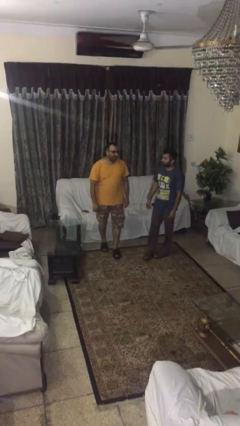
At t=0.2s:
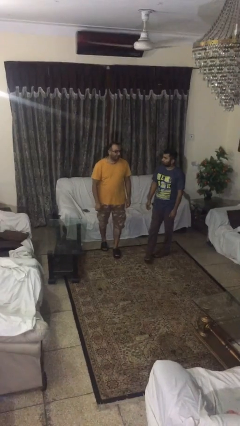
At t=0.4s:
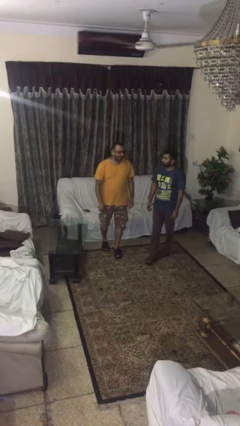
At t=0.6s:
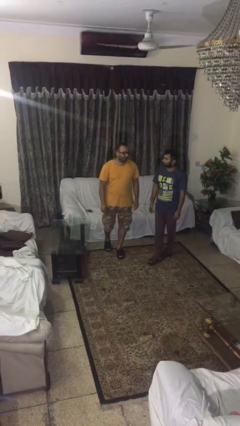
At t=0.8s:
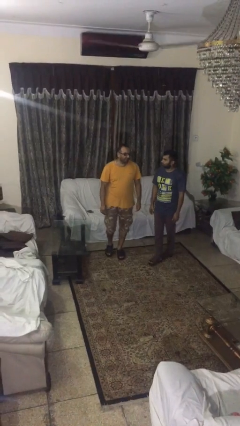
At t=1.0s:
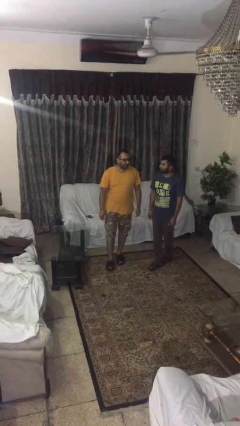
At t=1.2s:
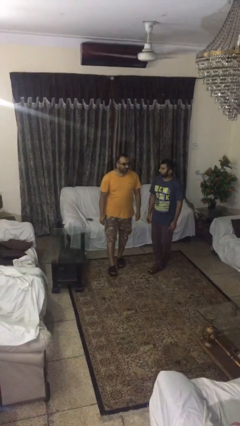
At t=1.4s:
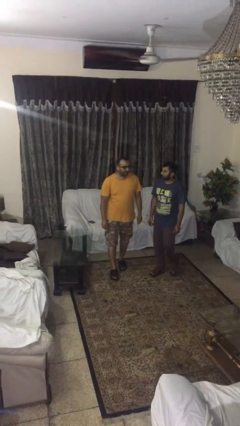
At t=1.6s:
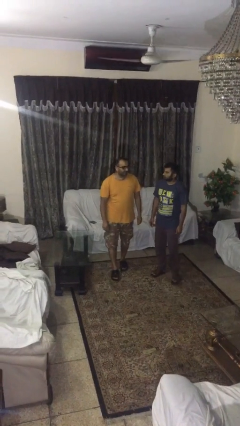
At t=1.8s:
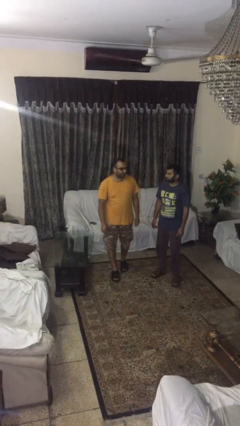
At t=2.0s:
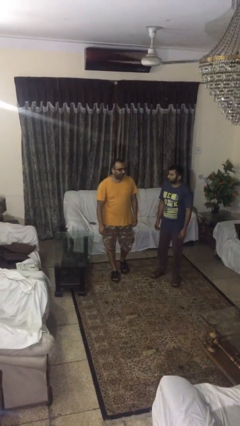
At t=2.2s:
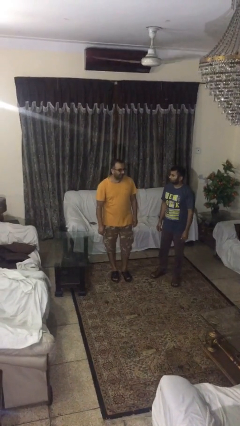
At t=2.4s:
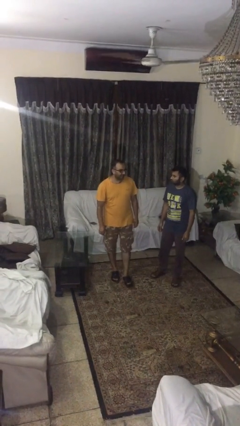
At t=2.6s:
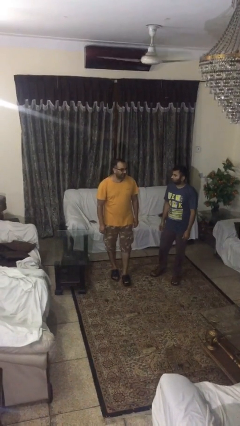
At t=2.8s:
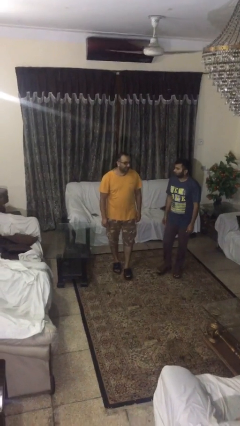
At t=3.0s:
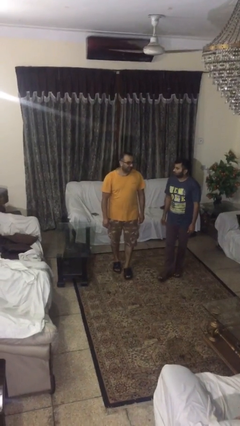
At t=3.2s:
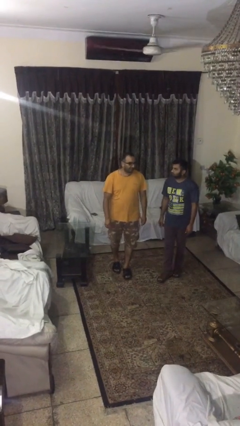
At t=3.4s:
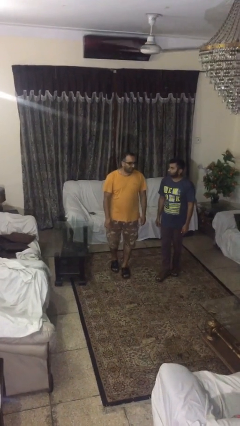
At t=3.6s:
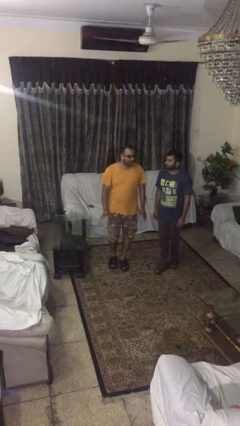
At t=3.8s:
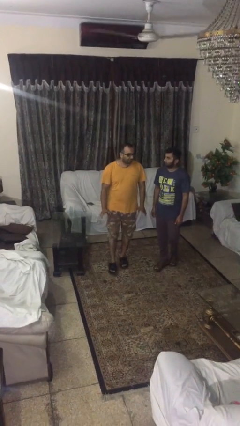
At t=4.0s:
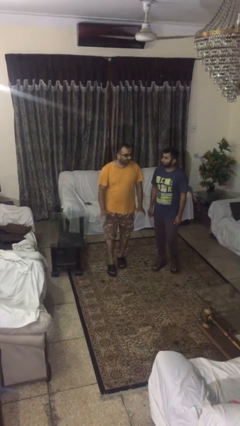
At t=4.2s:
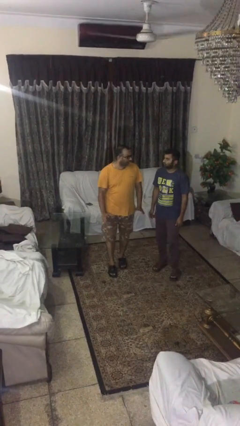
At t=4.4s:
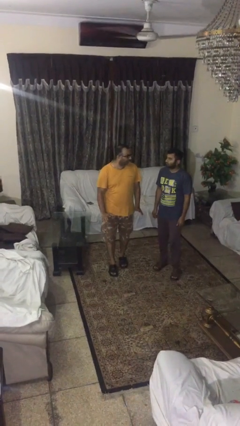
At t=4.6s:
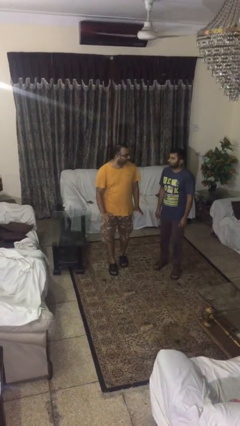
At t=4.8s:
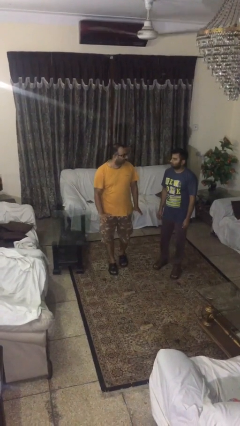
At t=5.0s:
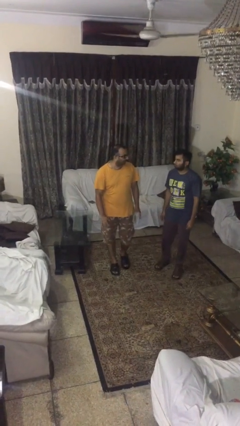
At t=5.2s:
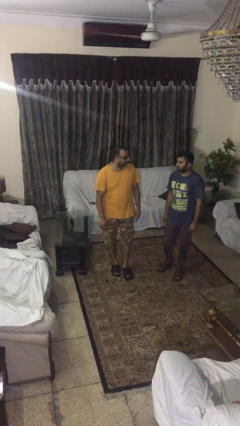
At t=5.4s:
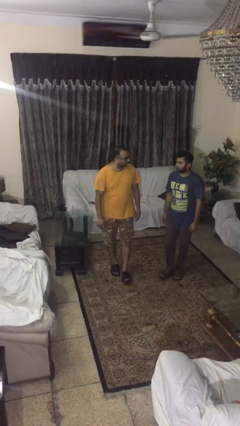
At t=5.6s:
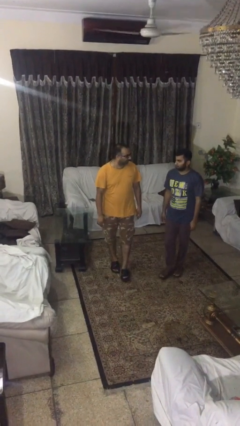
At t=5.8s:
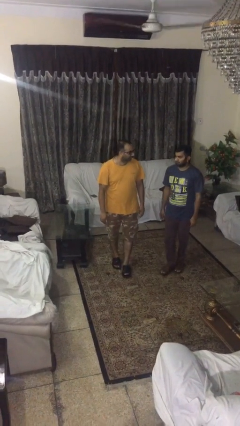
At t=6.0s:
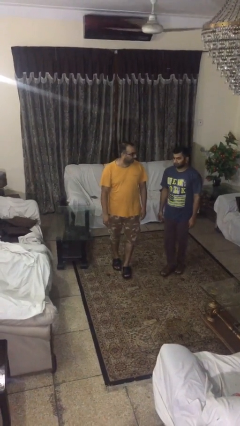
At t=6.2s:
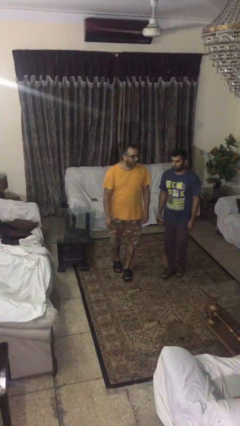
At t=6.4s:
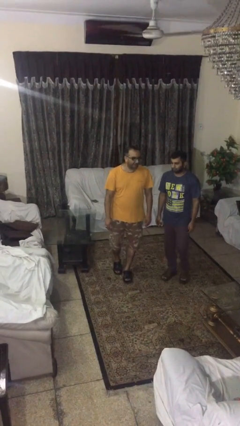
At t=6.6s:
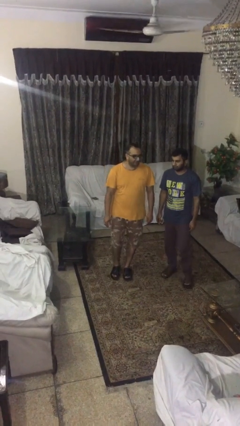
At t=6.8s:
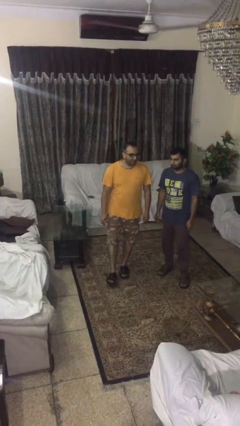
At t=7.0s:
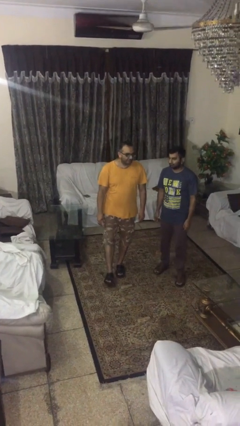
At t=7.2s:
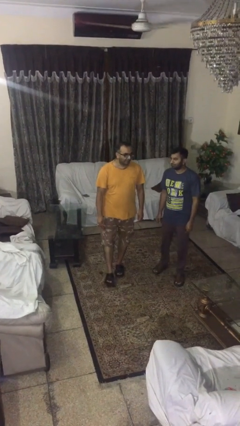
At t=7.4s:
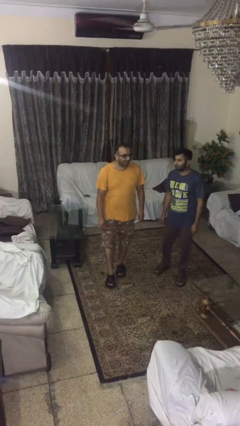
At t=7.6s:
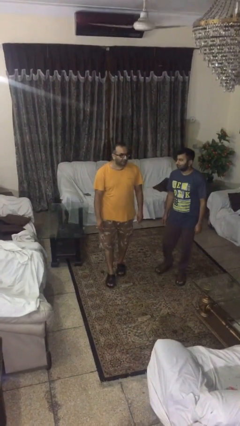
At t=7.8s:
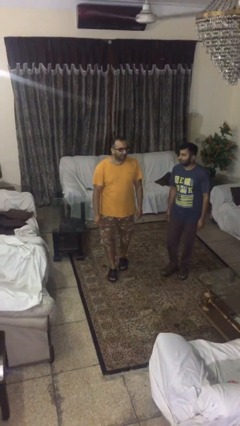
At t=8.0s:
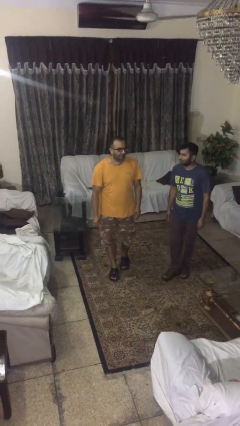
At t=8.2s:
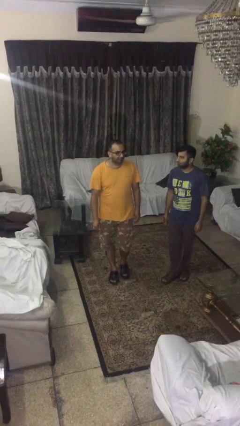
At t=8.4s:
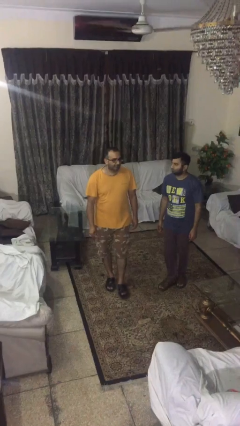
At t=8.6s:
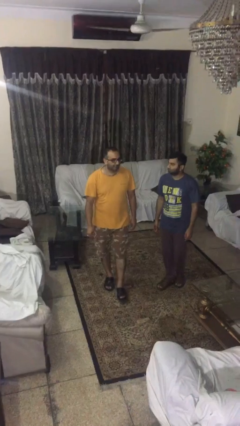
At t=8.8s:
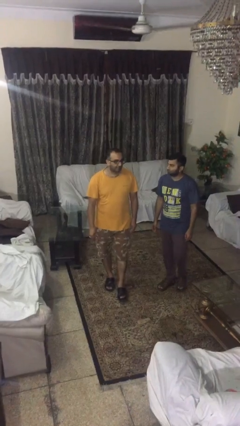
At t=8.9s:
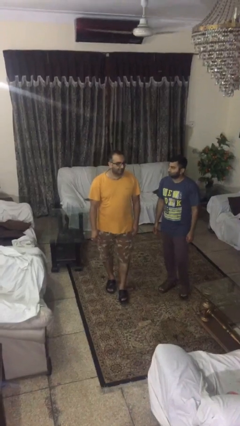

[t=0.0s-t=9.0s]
person talks to person

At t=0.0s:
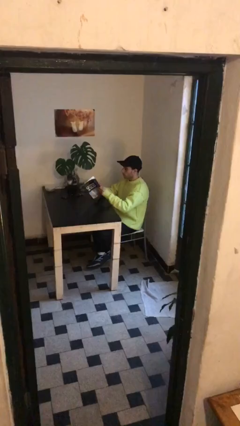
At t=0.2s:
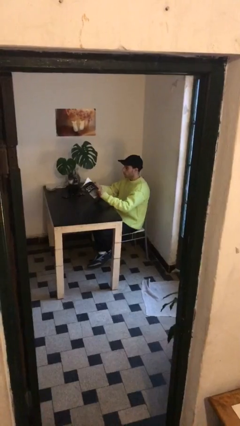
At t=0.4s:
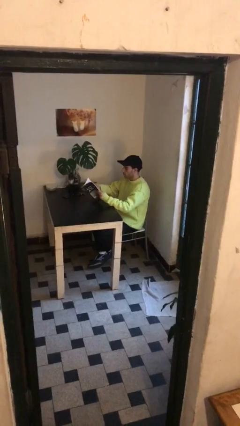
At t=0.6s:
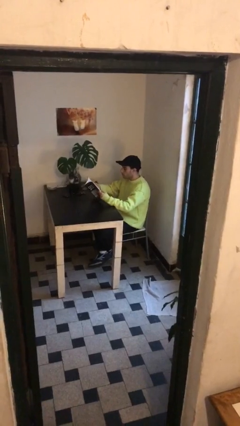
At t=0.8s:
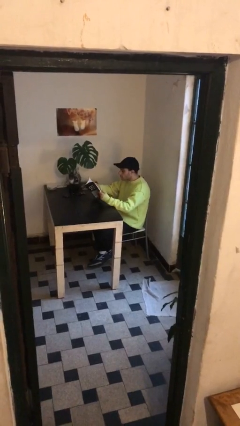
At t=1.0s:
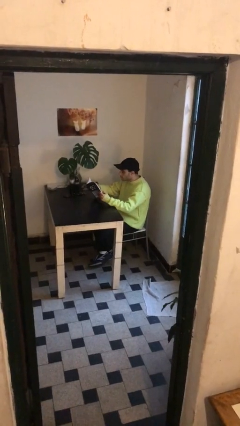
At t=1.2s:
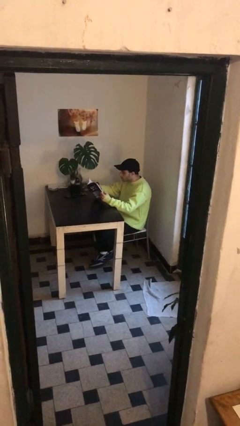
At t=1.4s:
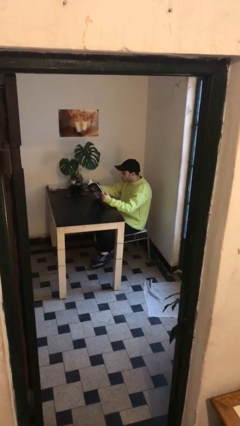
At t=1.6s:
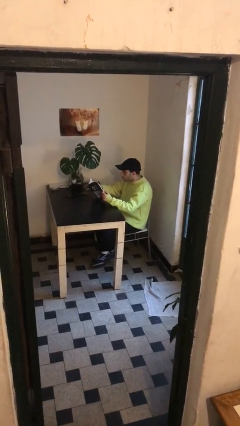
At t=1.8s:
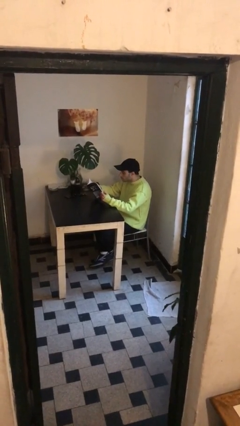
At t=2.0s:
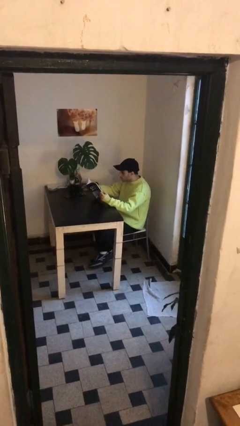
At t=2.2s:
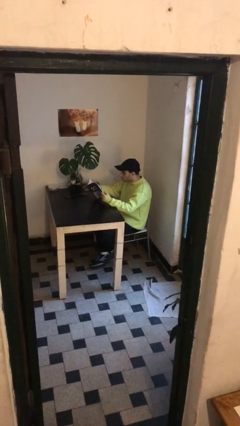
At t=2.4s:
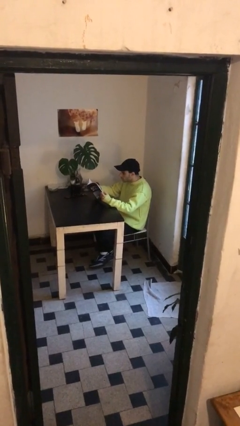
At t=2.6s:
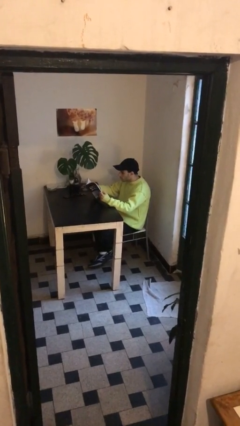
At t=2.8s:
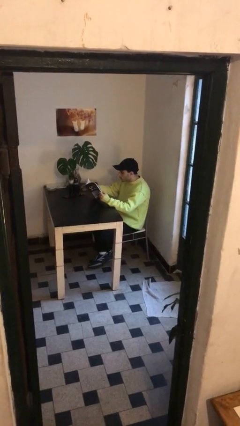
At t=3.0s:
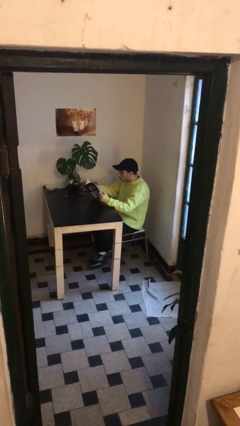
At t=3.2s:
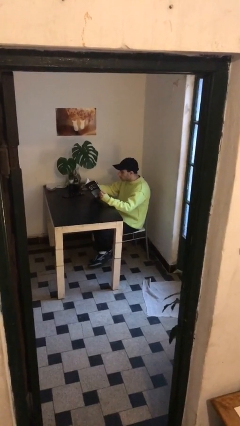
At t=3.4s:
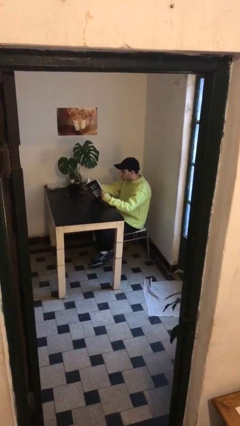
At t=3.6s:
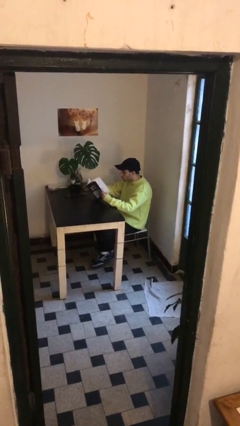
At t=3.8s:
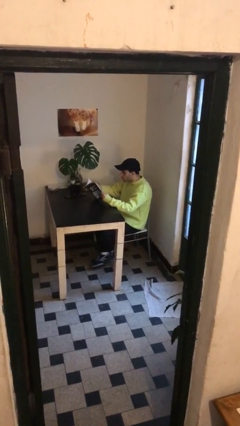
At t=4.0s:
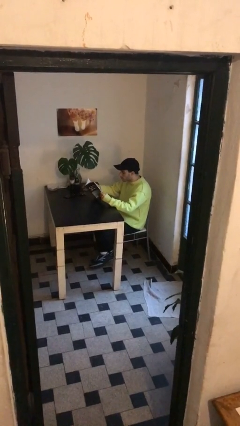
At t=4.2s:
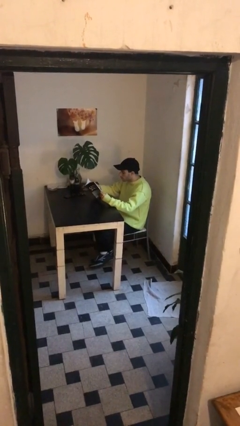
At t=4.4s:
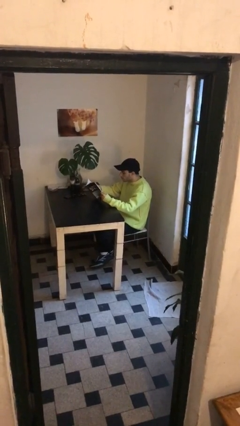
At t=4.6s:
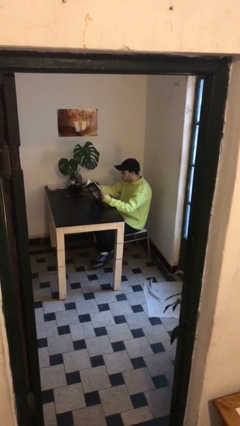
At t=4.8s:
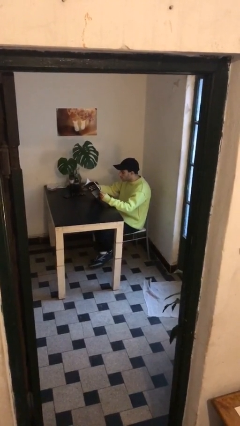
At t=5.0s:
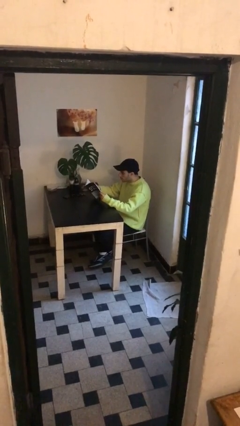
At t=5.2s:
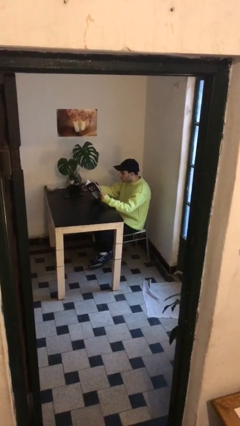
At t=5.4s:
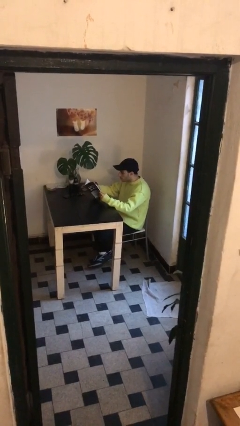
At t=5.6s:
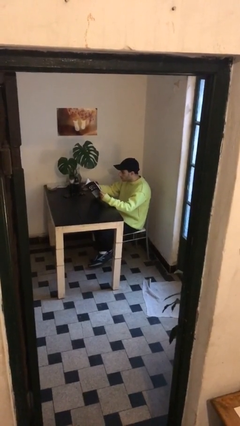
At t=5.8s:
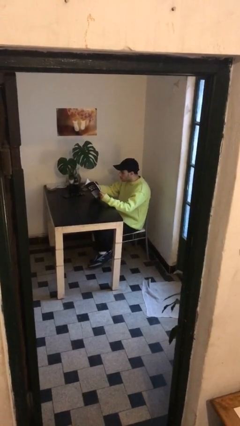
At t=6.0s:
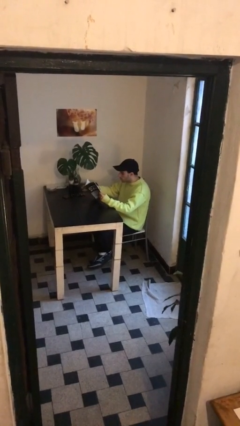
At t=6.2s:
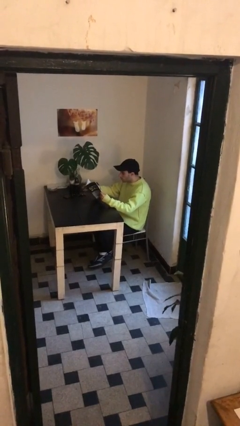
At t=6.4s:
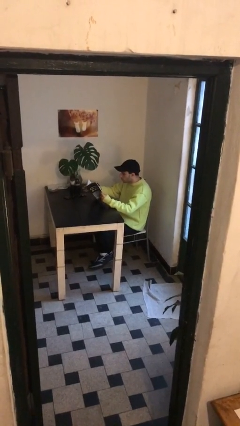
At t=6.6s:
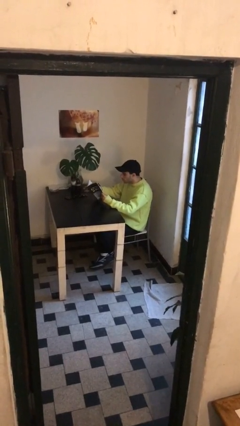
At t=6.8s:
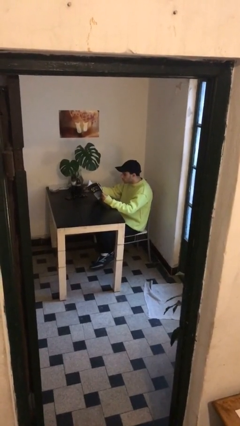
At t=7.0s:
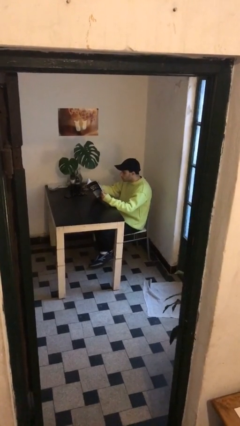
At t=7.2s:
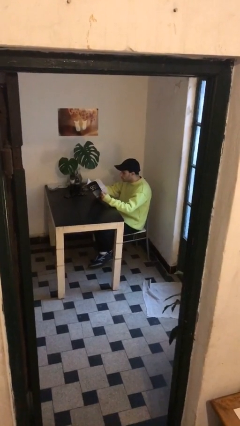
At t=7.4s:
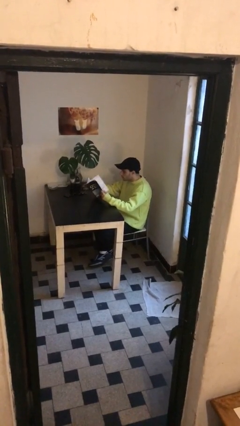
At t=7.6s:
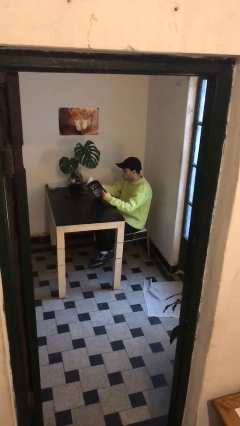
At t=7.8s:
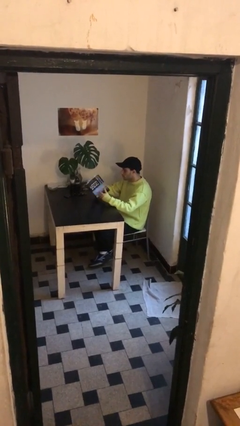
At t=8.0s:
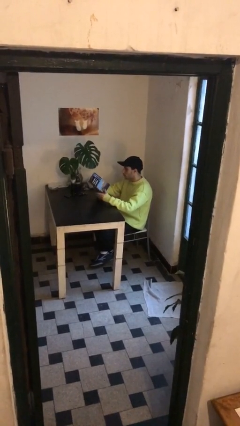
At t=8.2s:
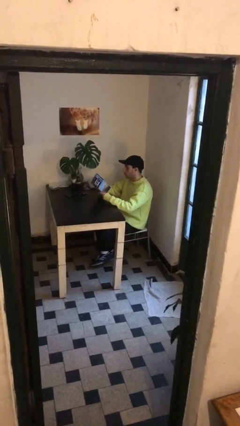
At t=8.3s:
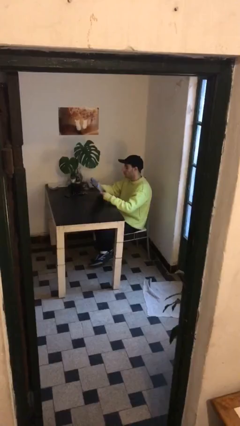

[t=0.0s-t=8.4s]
person reads document

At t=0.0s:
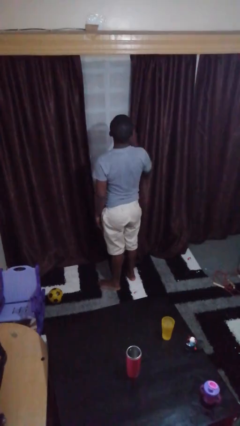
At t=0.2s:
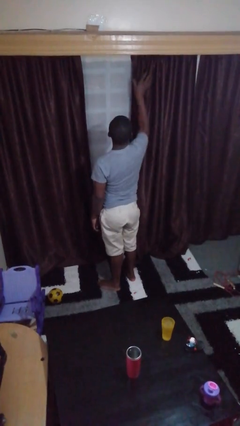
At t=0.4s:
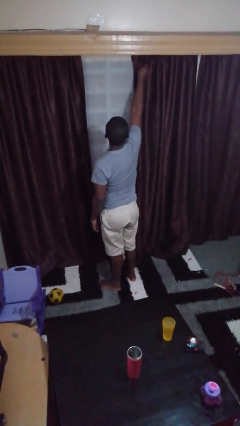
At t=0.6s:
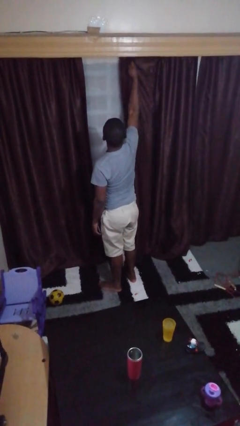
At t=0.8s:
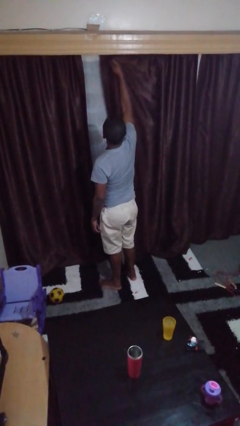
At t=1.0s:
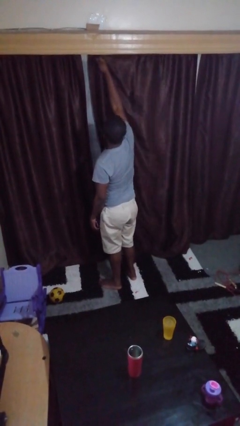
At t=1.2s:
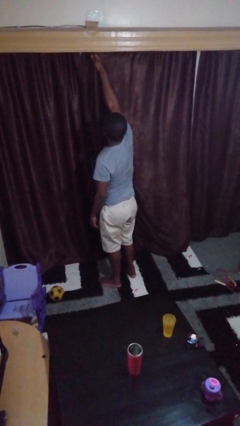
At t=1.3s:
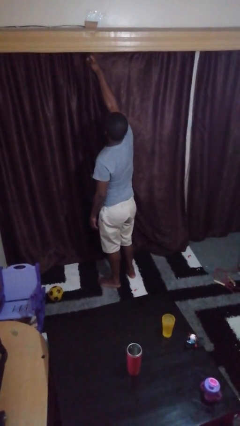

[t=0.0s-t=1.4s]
person closes curtains
